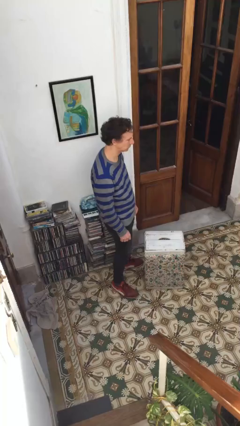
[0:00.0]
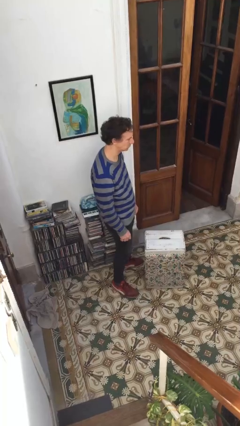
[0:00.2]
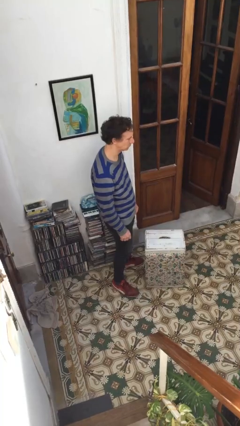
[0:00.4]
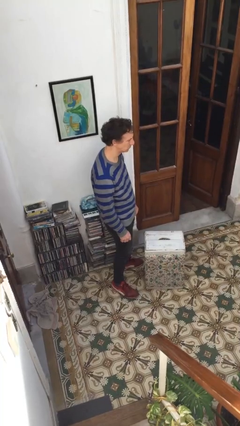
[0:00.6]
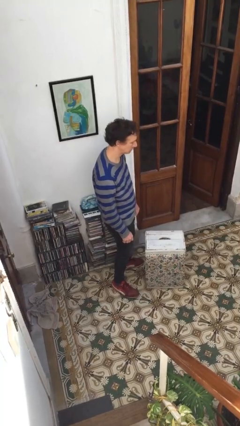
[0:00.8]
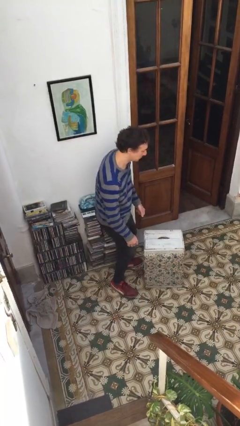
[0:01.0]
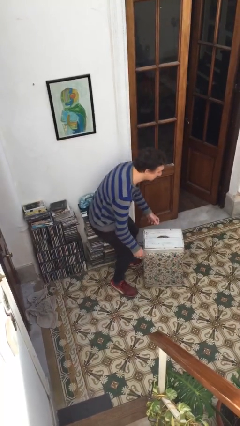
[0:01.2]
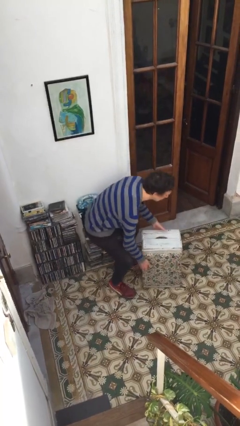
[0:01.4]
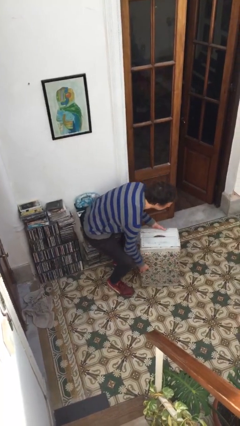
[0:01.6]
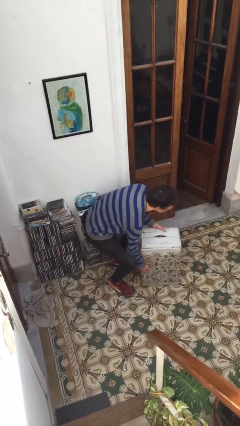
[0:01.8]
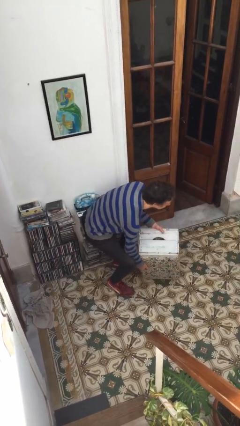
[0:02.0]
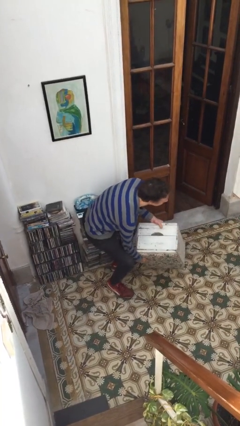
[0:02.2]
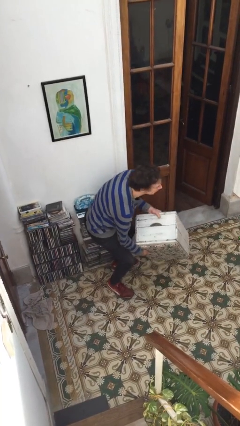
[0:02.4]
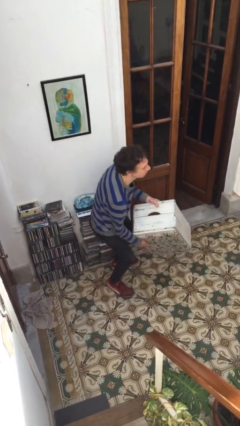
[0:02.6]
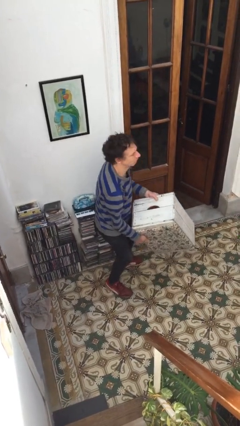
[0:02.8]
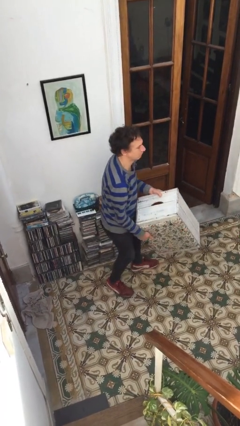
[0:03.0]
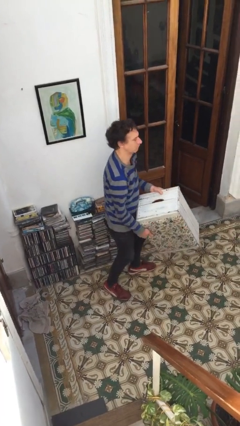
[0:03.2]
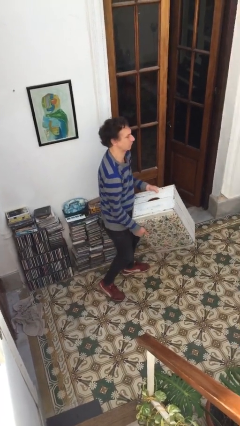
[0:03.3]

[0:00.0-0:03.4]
person picks up object from floor

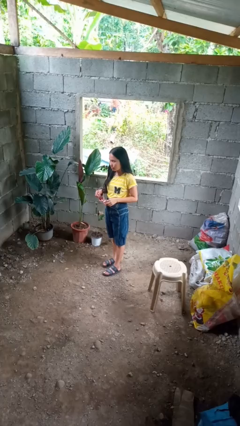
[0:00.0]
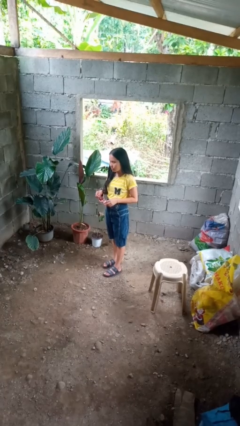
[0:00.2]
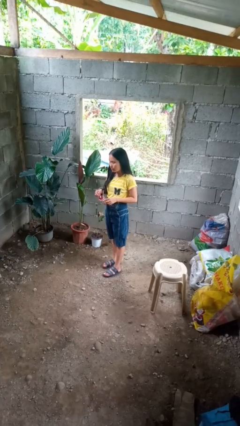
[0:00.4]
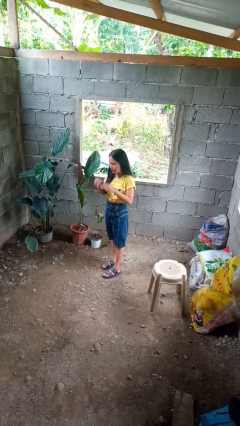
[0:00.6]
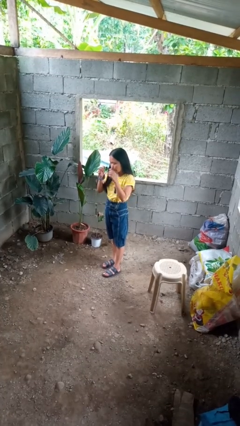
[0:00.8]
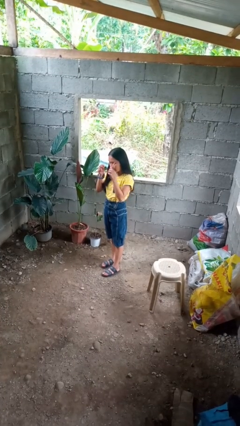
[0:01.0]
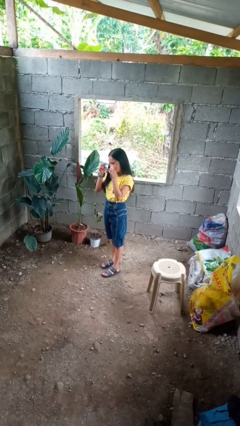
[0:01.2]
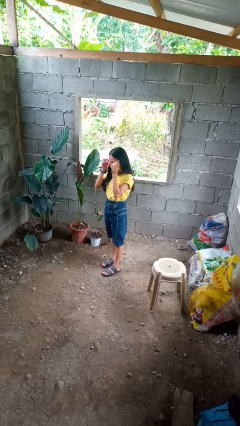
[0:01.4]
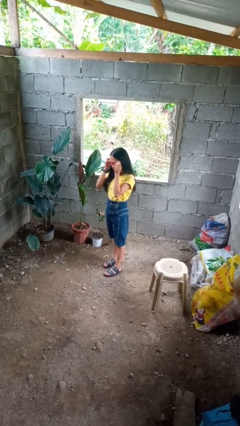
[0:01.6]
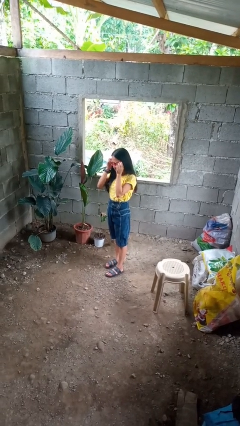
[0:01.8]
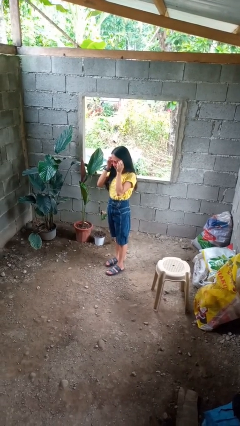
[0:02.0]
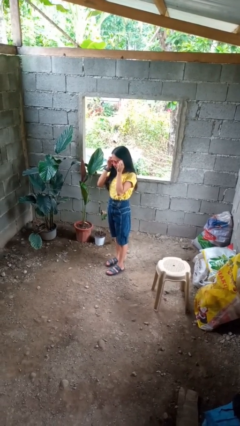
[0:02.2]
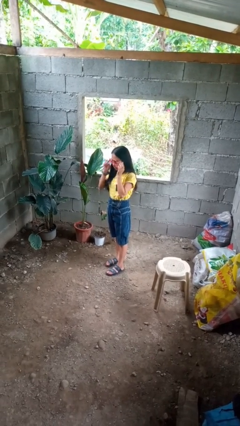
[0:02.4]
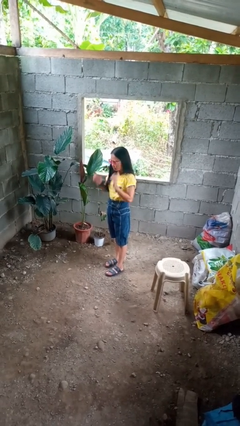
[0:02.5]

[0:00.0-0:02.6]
person puts on sunglasses

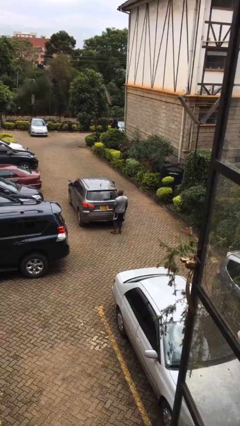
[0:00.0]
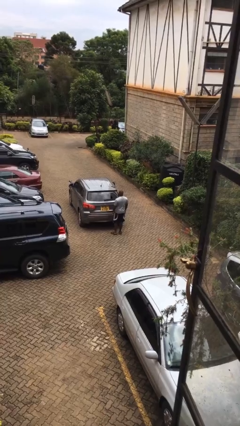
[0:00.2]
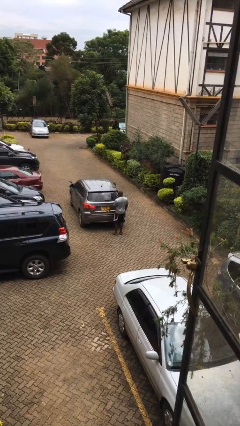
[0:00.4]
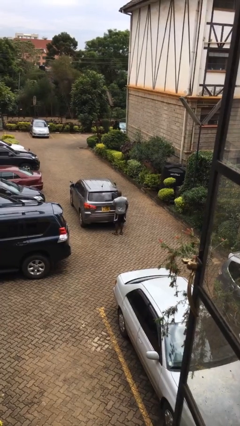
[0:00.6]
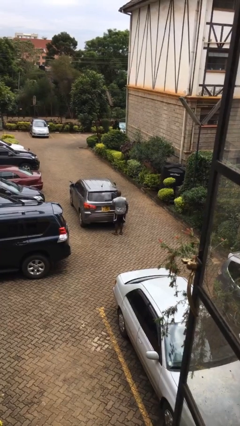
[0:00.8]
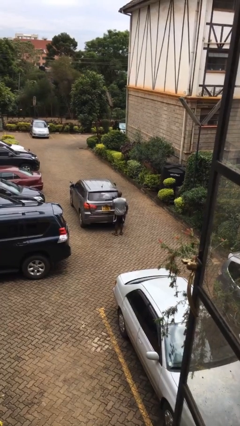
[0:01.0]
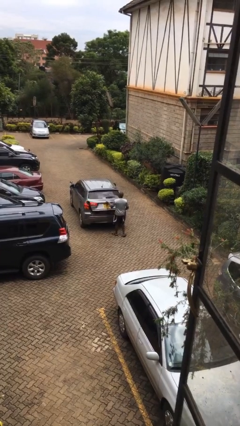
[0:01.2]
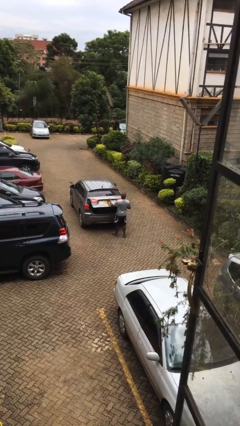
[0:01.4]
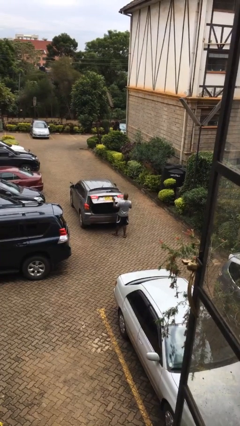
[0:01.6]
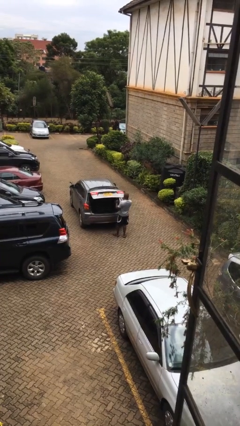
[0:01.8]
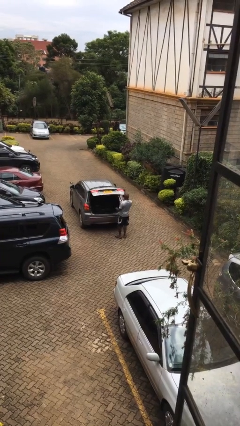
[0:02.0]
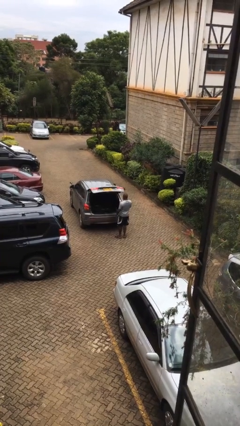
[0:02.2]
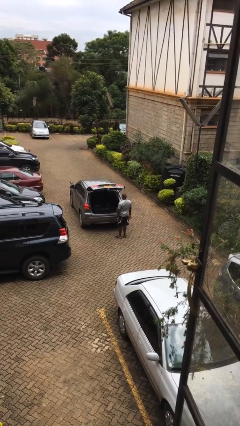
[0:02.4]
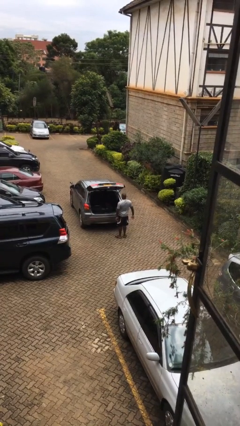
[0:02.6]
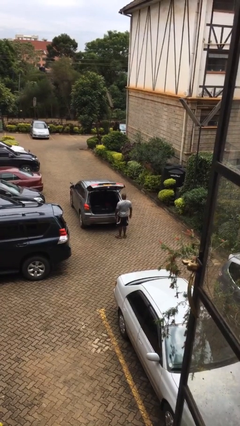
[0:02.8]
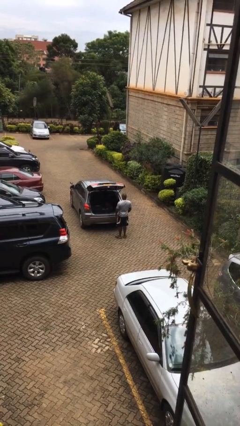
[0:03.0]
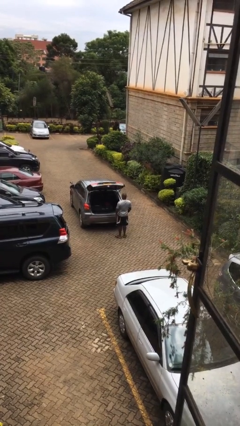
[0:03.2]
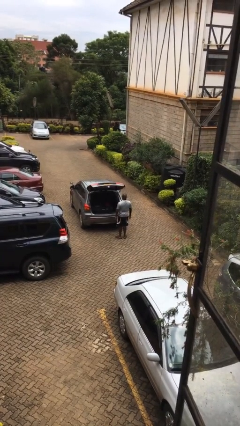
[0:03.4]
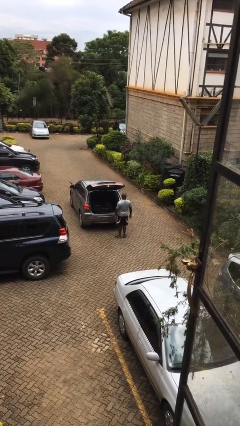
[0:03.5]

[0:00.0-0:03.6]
person opens car trunk

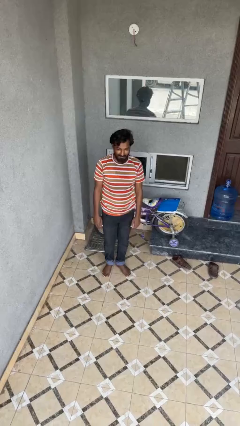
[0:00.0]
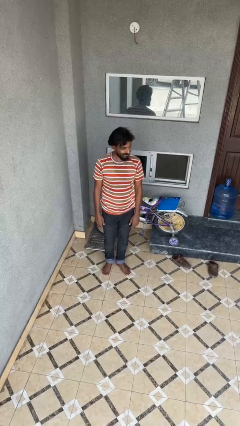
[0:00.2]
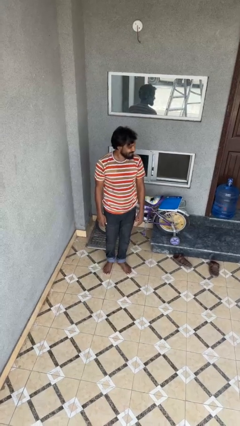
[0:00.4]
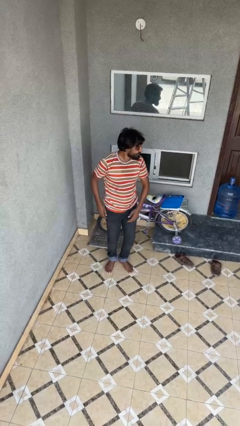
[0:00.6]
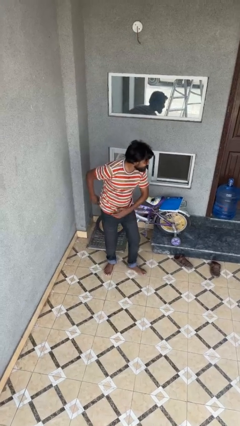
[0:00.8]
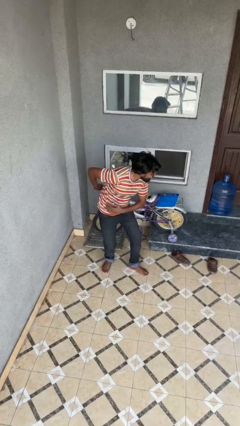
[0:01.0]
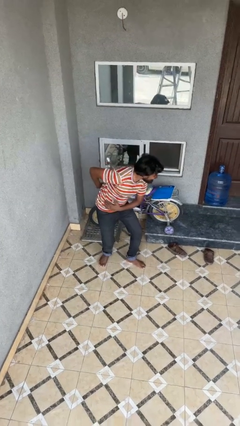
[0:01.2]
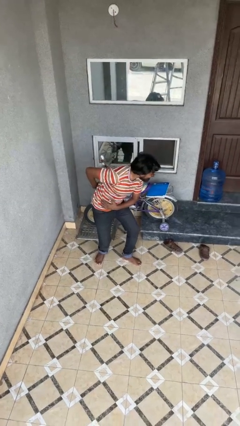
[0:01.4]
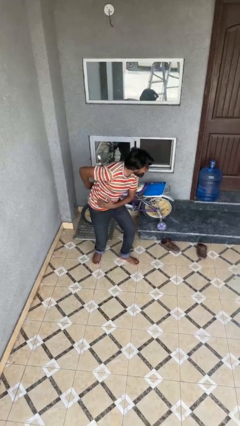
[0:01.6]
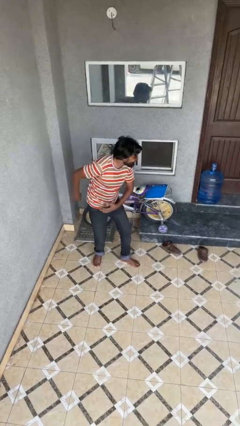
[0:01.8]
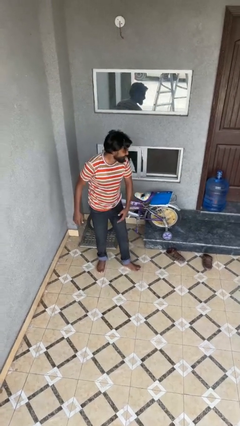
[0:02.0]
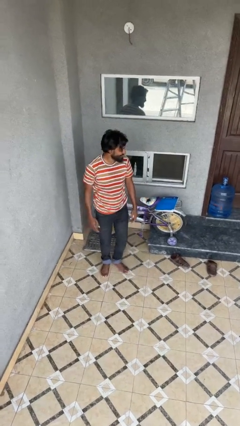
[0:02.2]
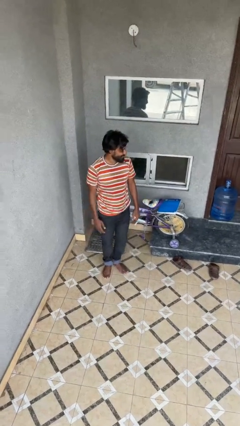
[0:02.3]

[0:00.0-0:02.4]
person bows

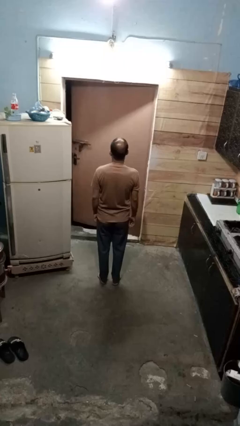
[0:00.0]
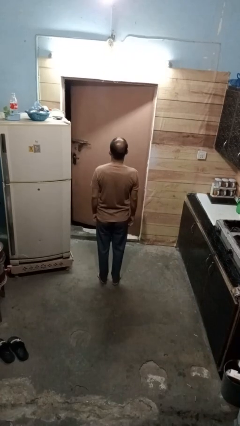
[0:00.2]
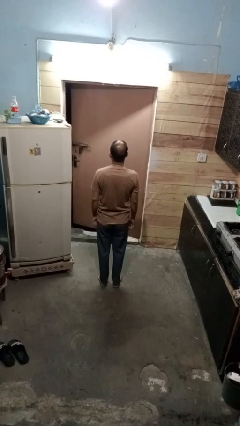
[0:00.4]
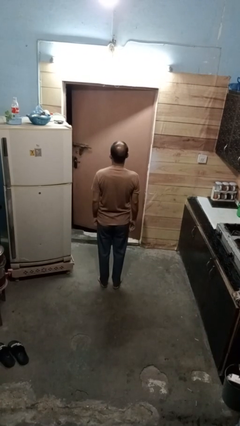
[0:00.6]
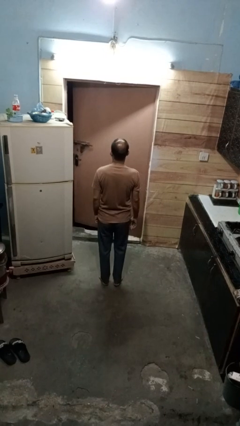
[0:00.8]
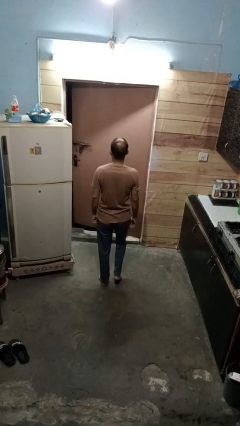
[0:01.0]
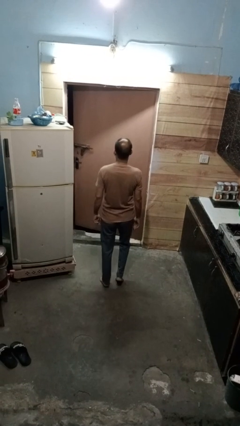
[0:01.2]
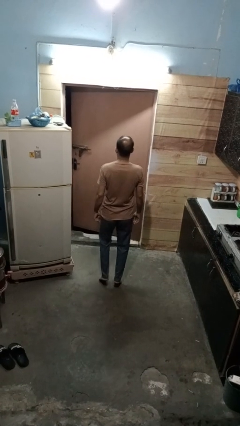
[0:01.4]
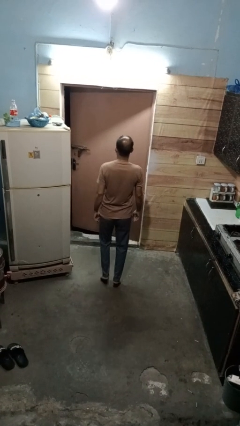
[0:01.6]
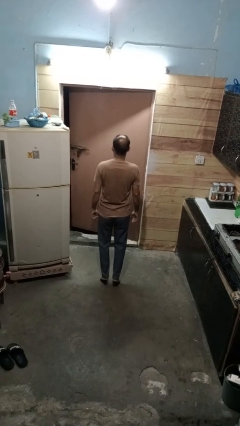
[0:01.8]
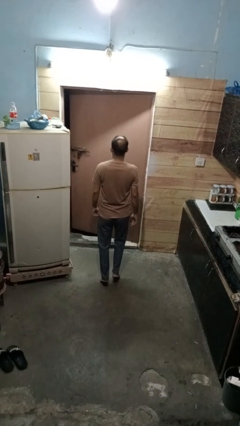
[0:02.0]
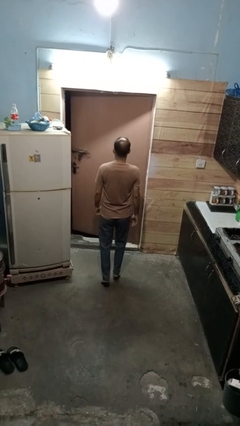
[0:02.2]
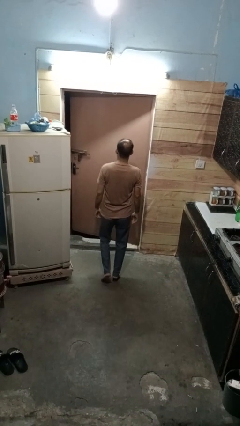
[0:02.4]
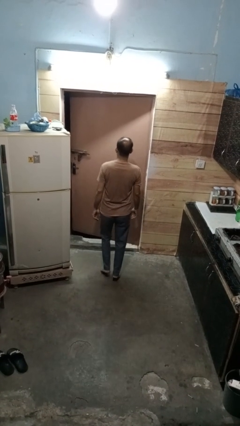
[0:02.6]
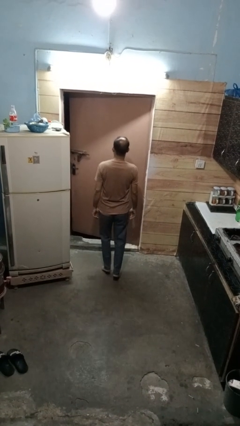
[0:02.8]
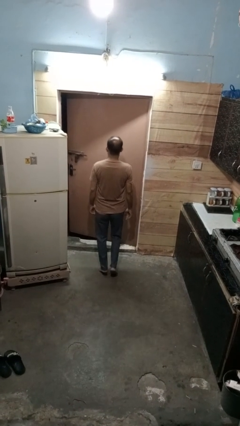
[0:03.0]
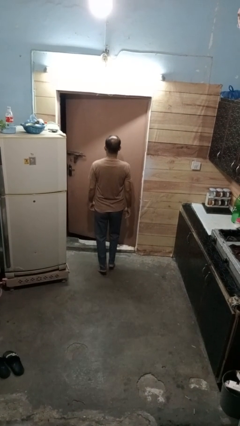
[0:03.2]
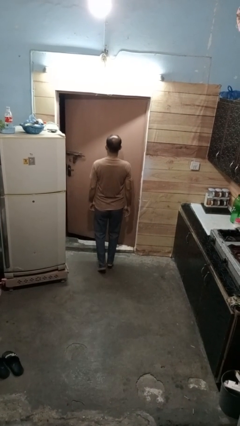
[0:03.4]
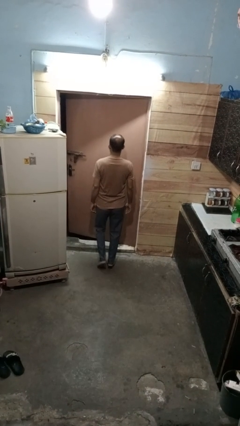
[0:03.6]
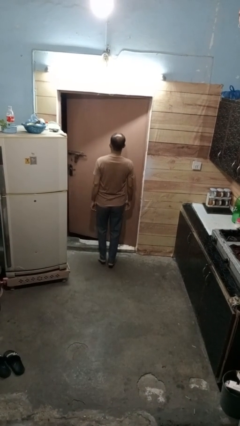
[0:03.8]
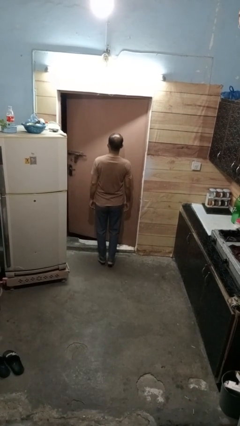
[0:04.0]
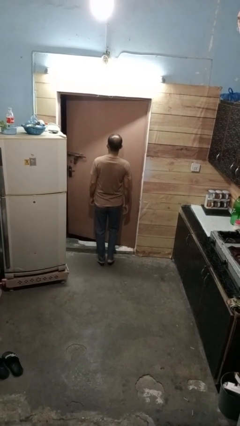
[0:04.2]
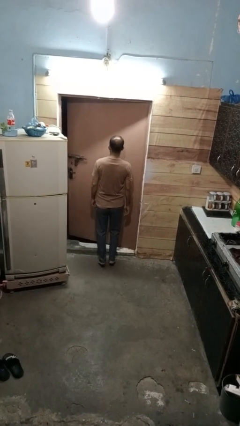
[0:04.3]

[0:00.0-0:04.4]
person walks tiptoe

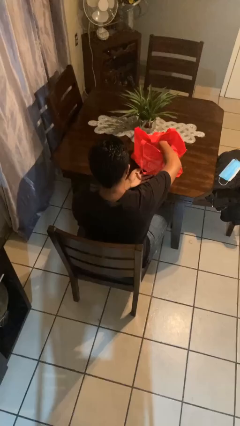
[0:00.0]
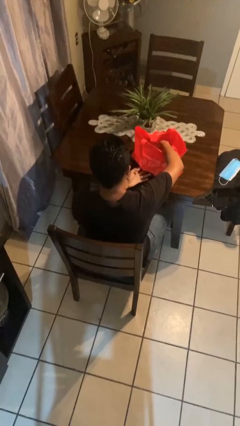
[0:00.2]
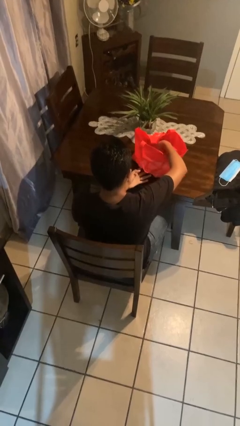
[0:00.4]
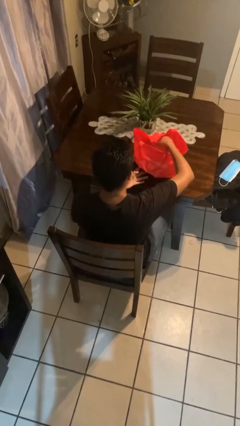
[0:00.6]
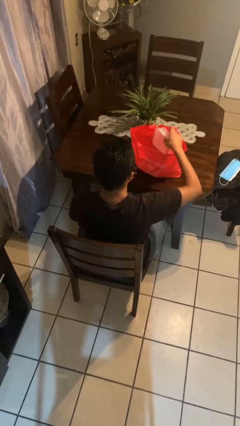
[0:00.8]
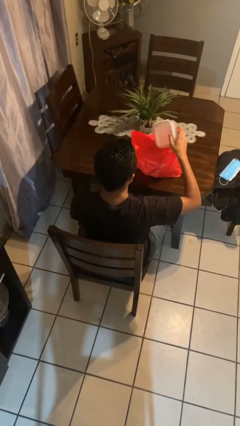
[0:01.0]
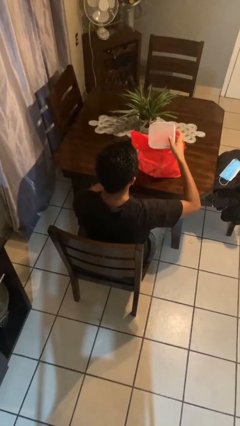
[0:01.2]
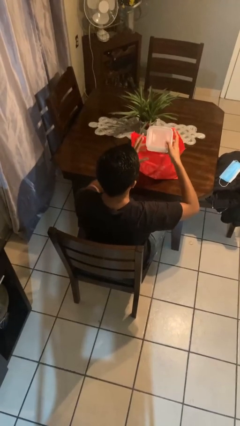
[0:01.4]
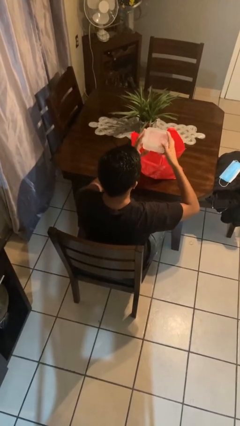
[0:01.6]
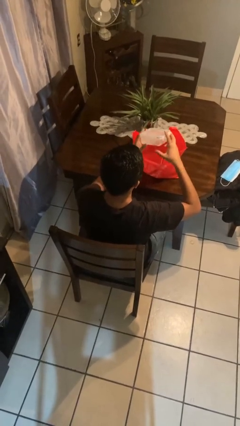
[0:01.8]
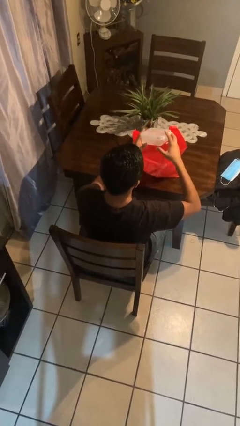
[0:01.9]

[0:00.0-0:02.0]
person takes object from bag
